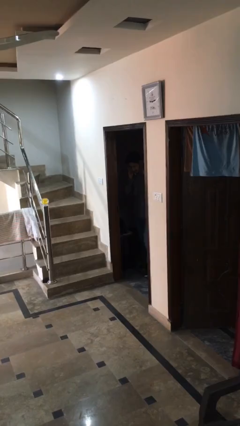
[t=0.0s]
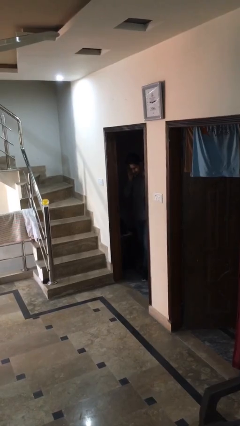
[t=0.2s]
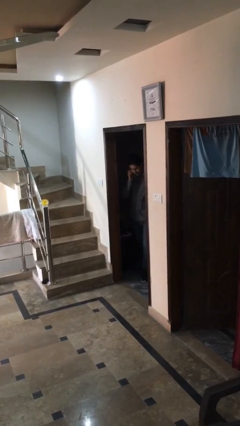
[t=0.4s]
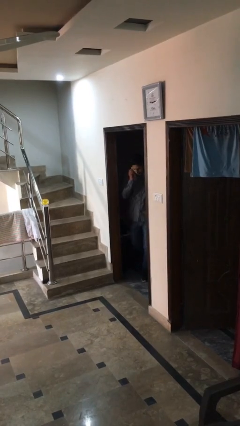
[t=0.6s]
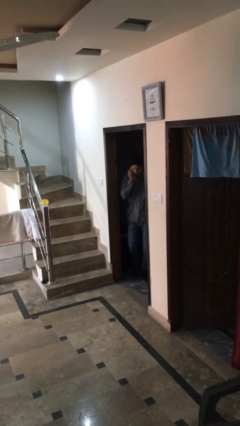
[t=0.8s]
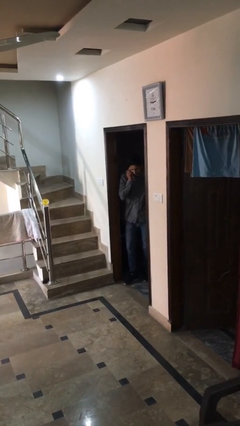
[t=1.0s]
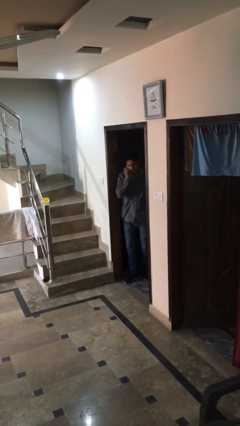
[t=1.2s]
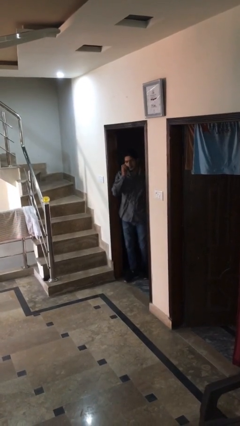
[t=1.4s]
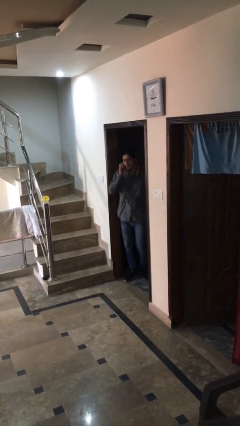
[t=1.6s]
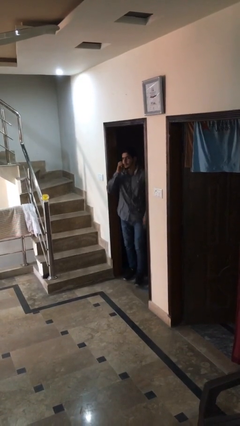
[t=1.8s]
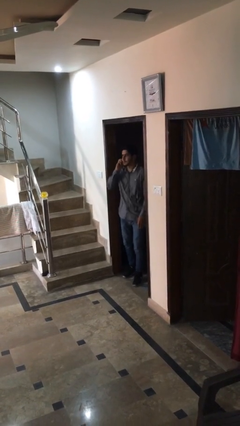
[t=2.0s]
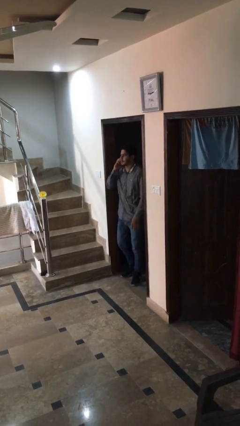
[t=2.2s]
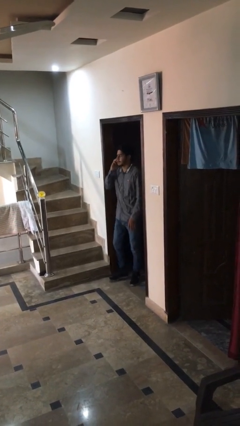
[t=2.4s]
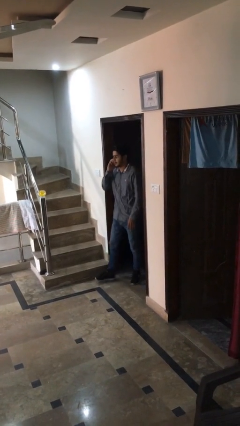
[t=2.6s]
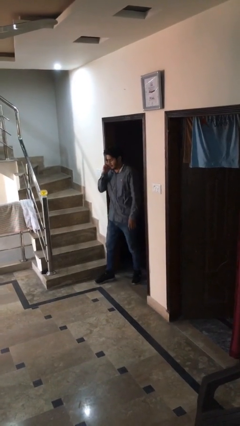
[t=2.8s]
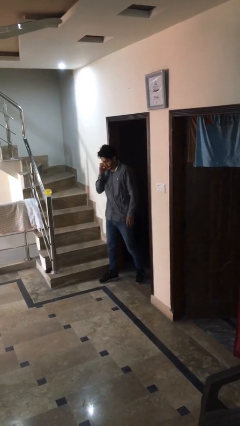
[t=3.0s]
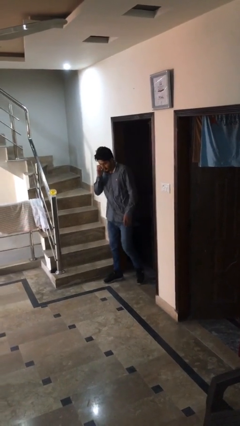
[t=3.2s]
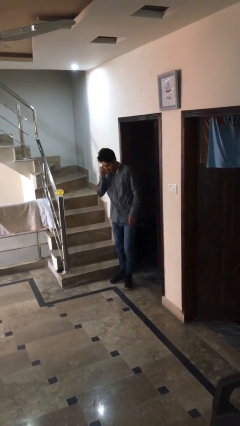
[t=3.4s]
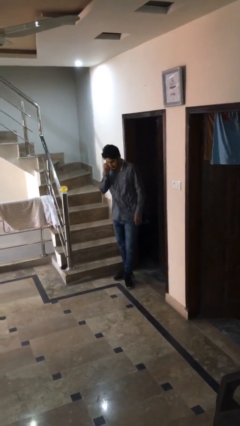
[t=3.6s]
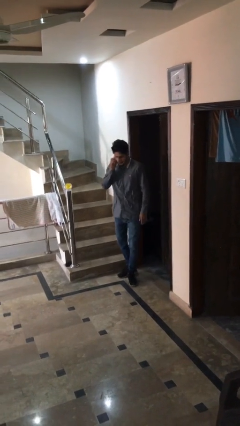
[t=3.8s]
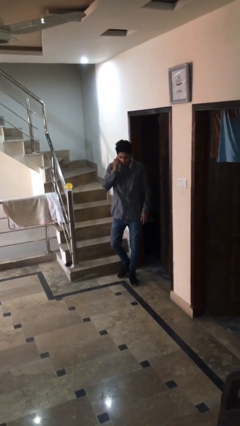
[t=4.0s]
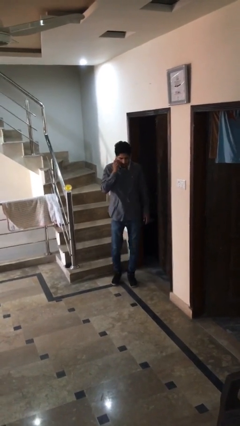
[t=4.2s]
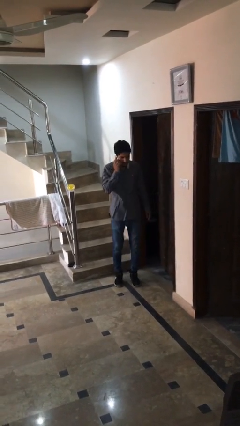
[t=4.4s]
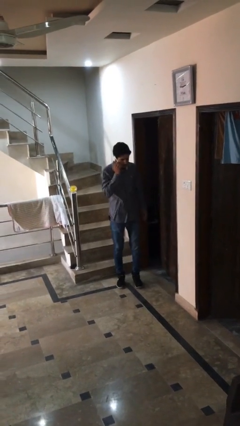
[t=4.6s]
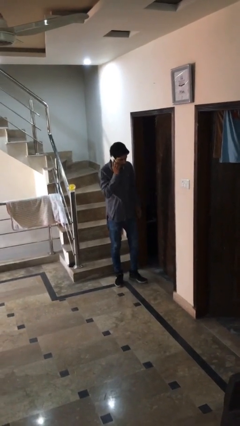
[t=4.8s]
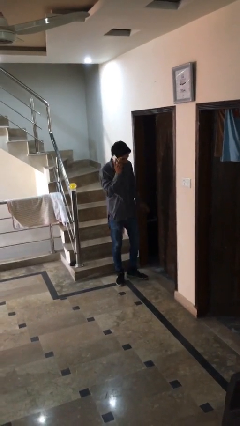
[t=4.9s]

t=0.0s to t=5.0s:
person enters scene through structure

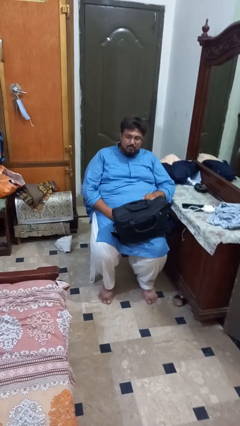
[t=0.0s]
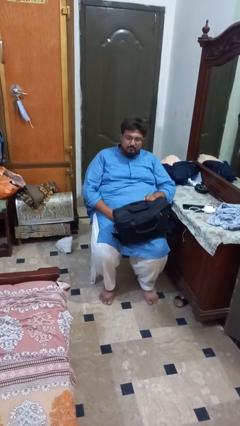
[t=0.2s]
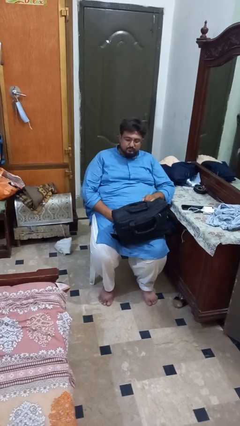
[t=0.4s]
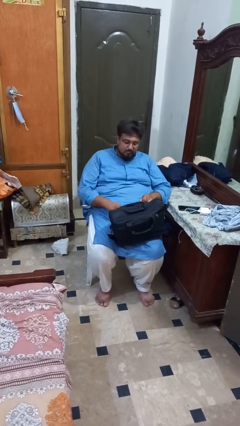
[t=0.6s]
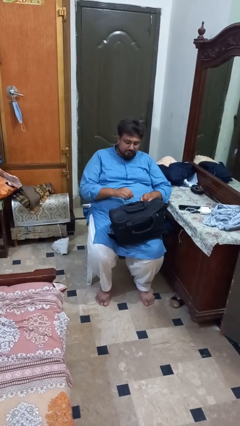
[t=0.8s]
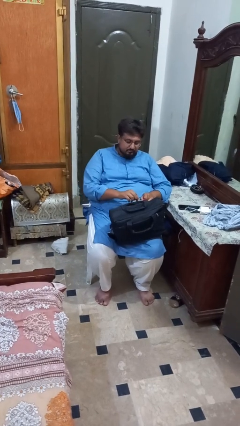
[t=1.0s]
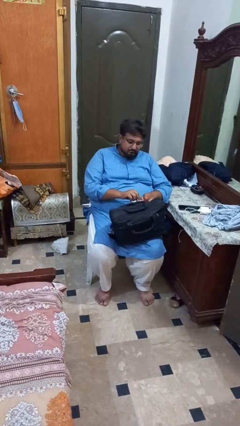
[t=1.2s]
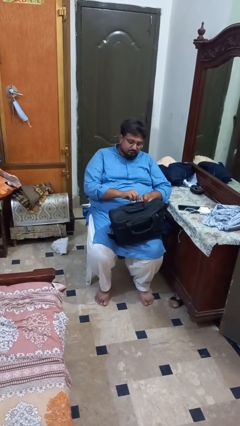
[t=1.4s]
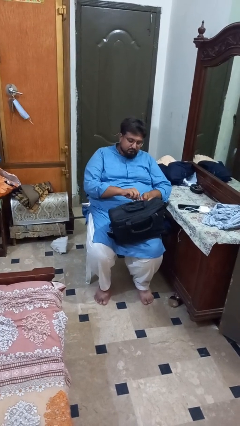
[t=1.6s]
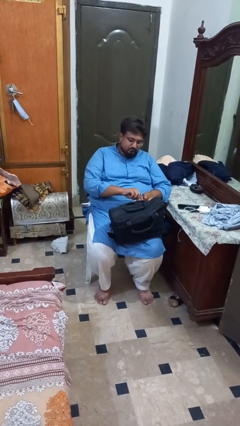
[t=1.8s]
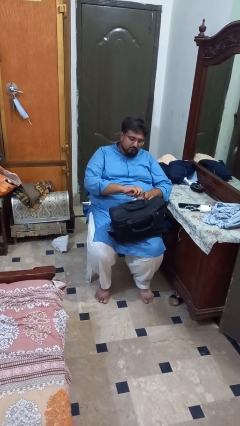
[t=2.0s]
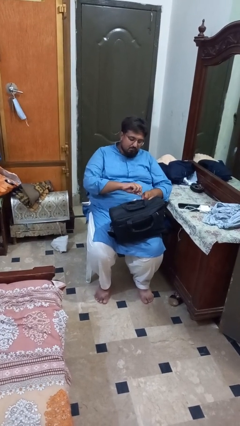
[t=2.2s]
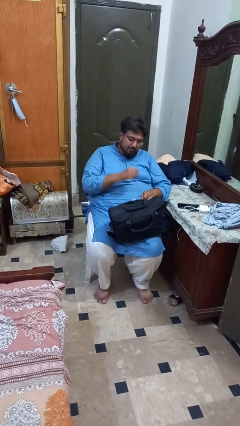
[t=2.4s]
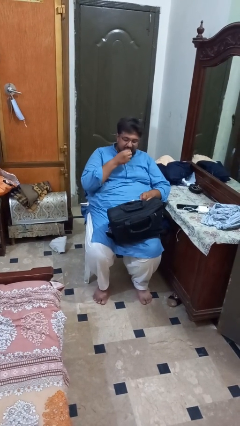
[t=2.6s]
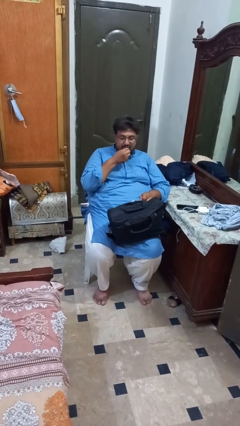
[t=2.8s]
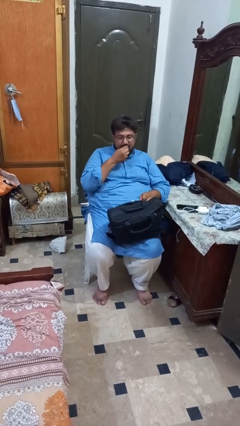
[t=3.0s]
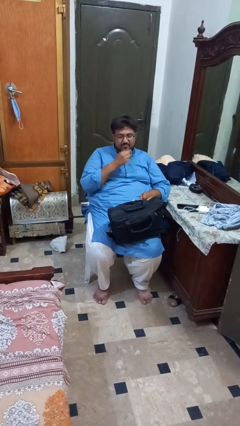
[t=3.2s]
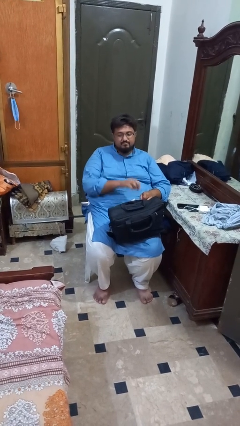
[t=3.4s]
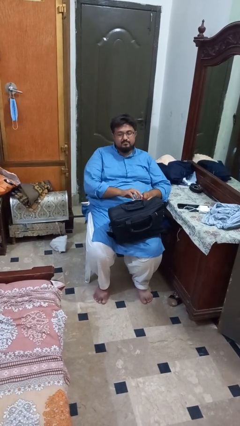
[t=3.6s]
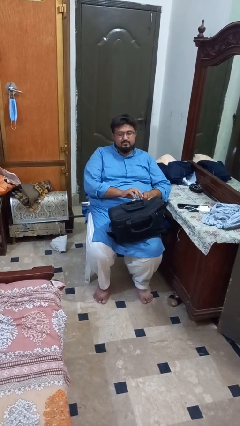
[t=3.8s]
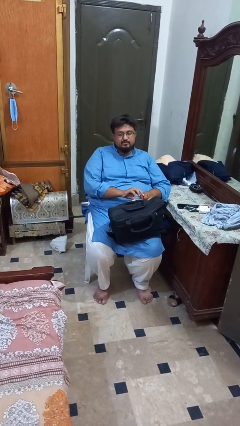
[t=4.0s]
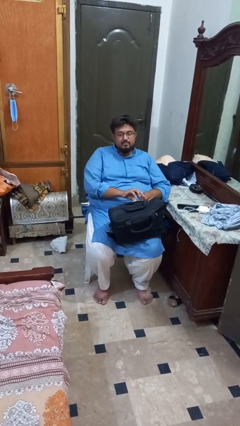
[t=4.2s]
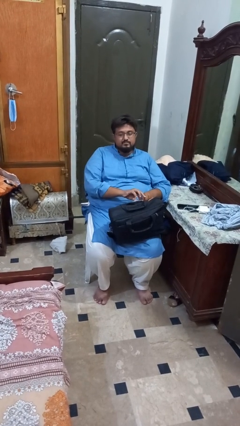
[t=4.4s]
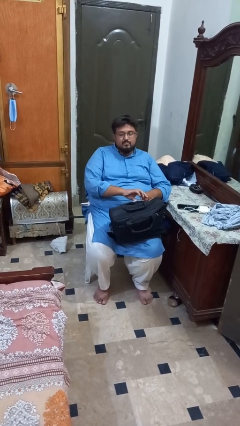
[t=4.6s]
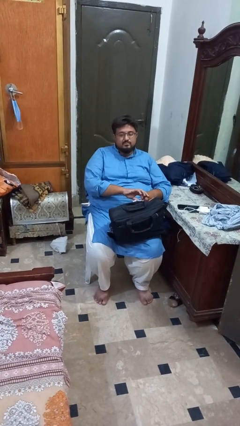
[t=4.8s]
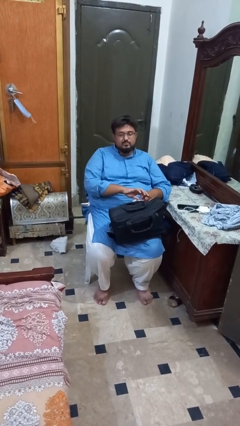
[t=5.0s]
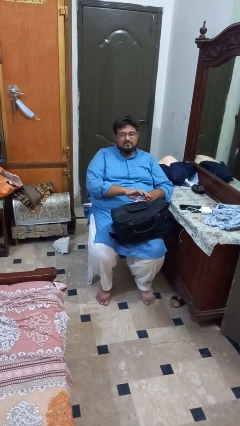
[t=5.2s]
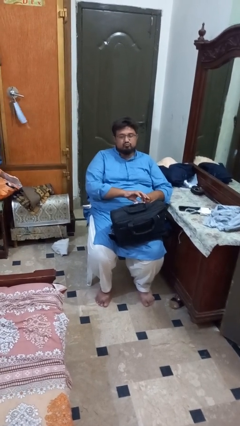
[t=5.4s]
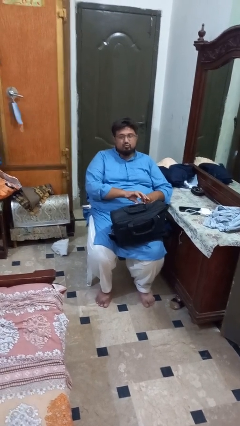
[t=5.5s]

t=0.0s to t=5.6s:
person eats snack from bag

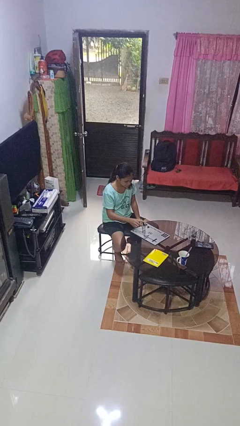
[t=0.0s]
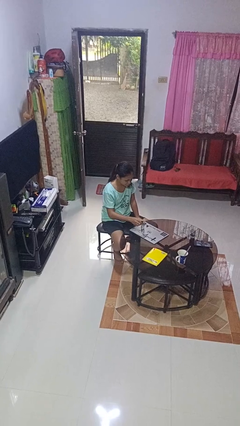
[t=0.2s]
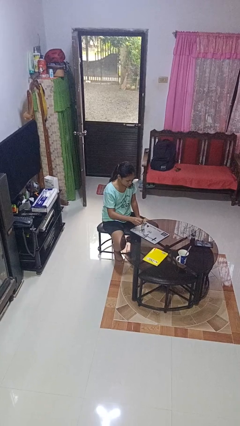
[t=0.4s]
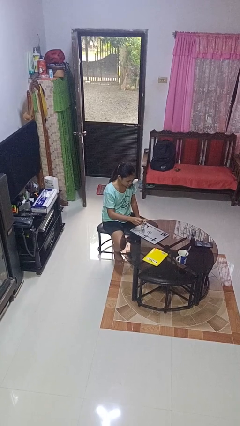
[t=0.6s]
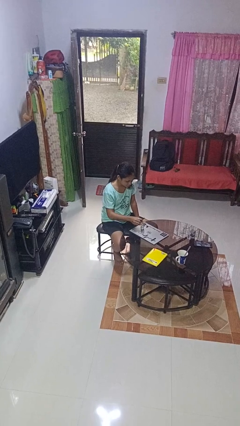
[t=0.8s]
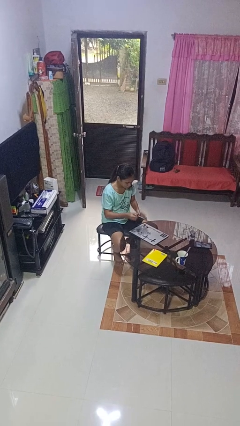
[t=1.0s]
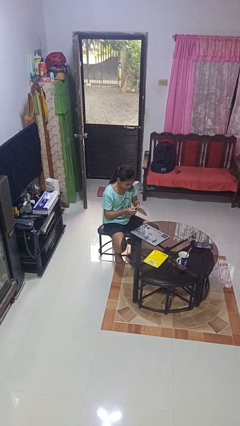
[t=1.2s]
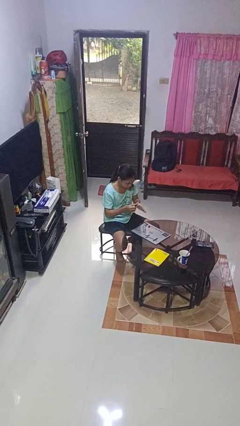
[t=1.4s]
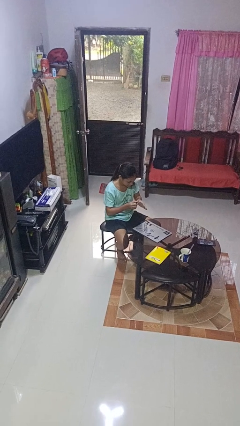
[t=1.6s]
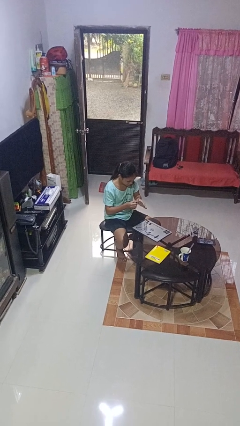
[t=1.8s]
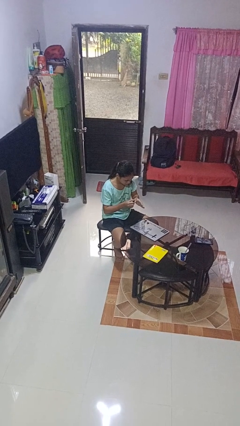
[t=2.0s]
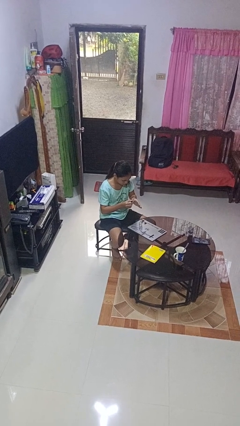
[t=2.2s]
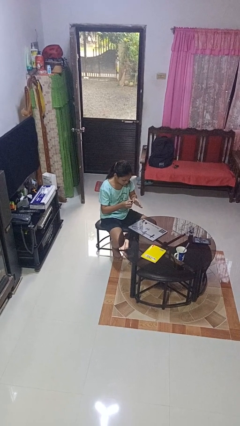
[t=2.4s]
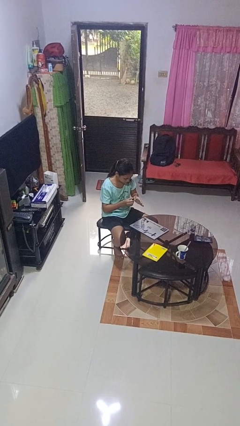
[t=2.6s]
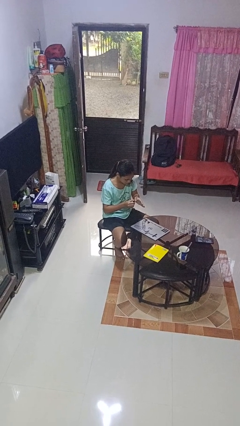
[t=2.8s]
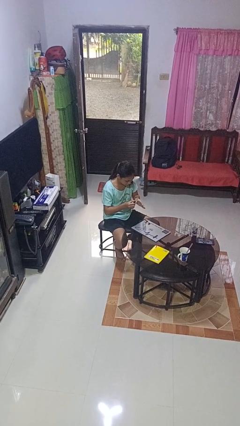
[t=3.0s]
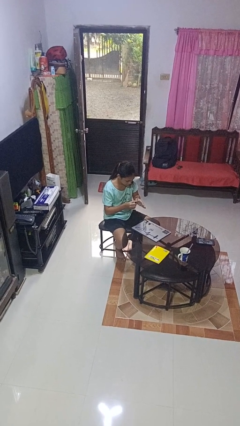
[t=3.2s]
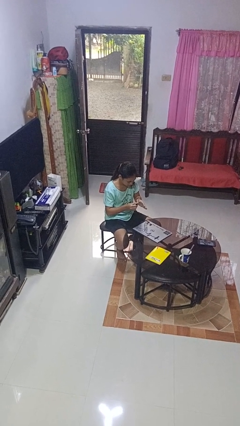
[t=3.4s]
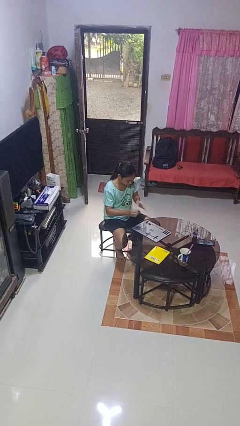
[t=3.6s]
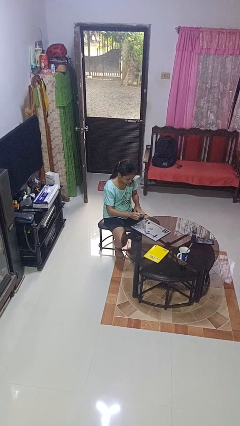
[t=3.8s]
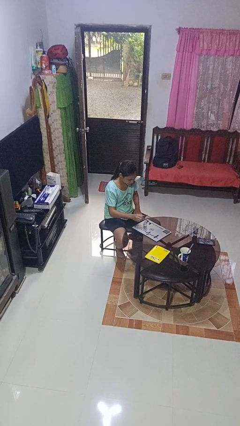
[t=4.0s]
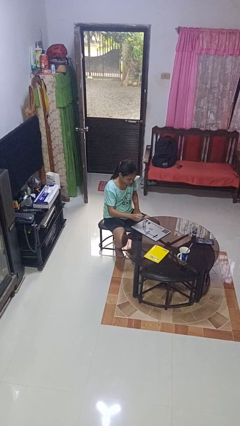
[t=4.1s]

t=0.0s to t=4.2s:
person paints fingernails

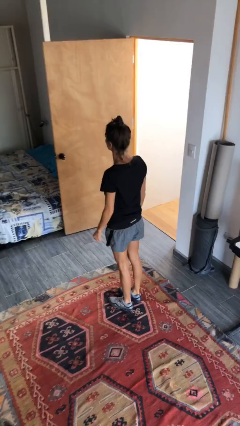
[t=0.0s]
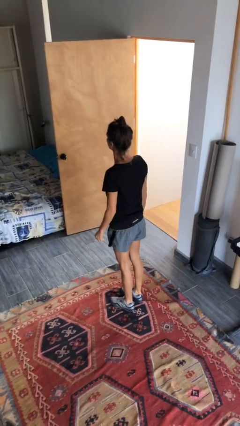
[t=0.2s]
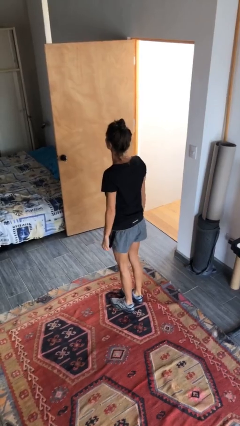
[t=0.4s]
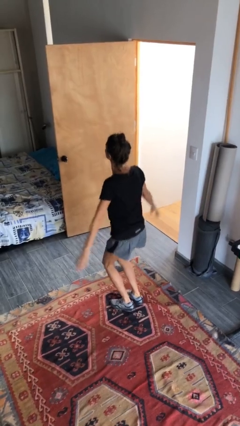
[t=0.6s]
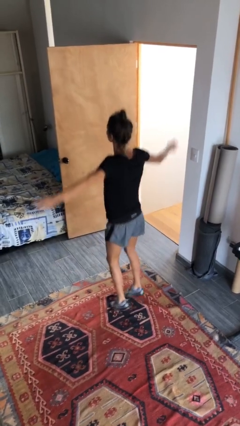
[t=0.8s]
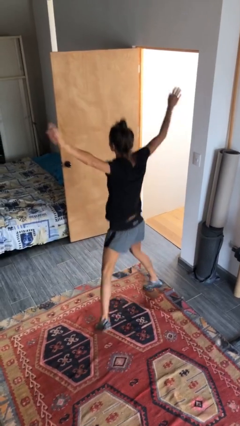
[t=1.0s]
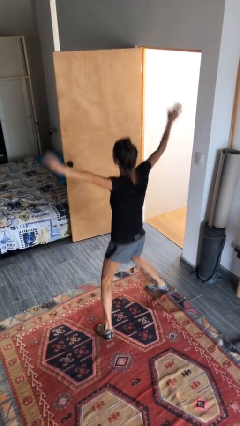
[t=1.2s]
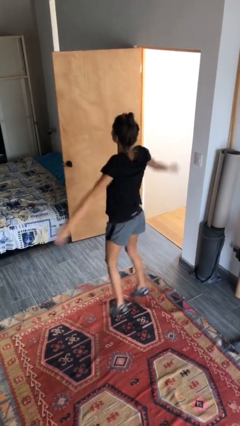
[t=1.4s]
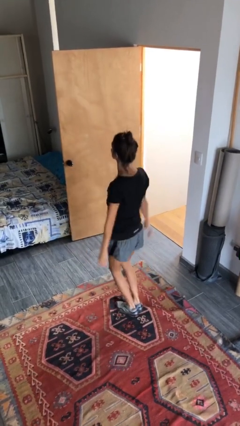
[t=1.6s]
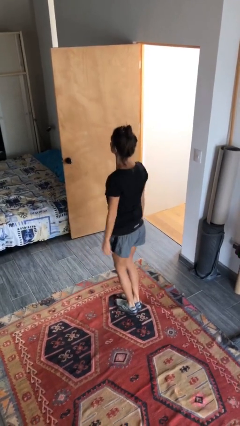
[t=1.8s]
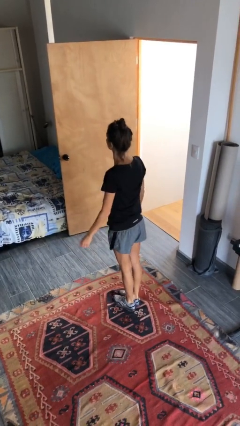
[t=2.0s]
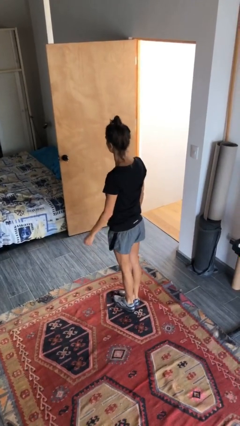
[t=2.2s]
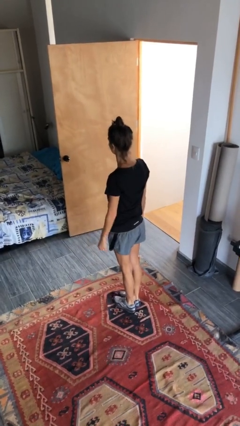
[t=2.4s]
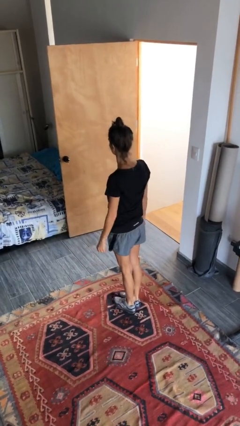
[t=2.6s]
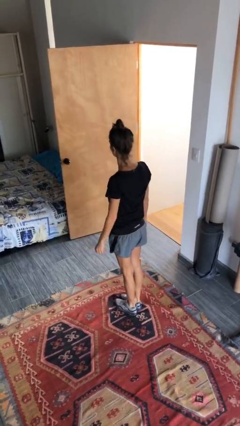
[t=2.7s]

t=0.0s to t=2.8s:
person exercises with jumping jacks
